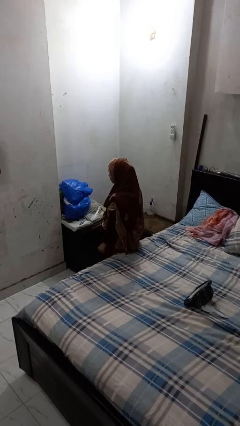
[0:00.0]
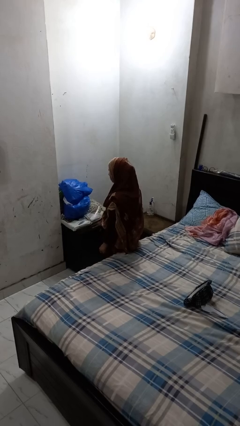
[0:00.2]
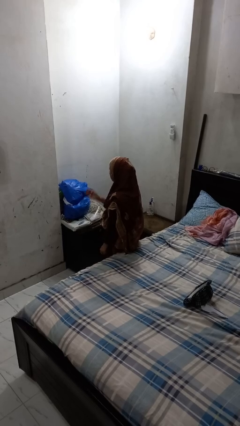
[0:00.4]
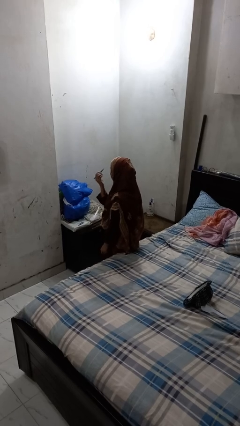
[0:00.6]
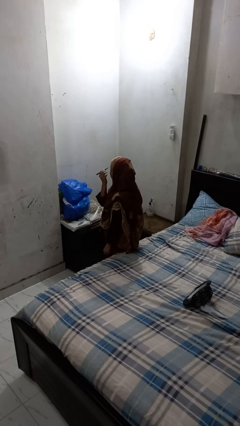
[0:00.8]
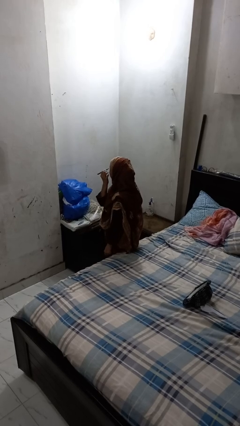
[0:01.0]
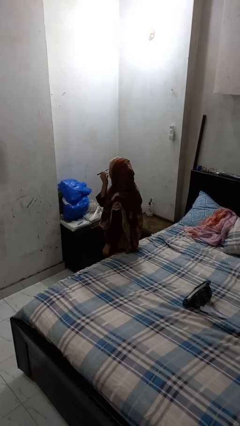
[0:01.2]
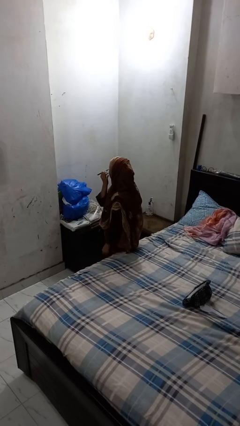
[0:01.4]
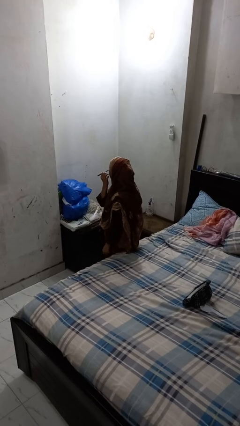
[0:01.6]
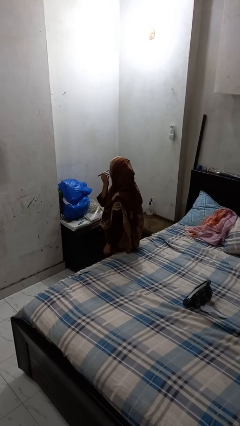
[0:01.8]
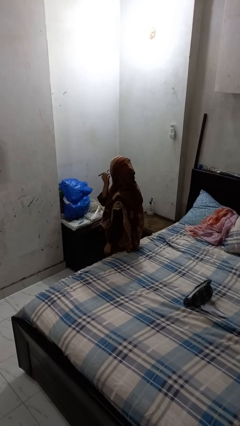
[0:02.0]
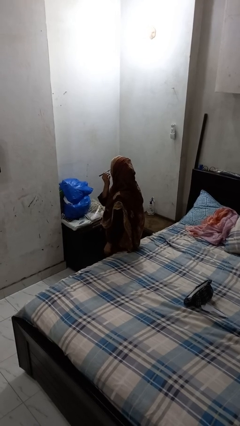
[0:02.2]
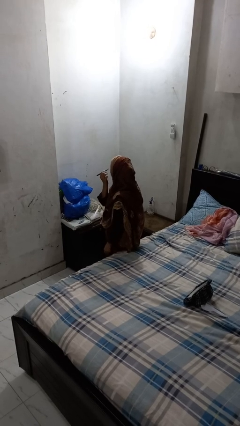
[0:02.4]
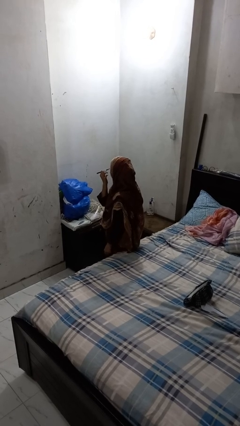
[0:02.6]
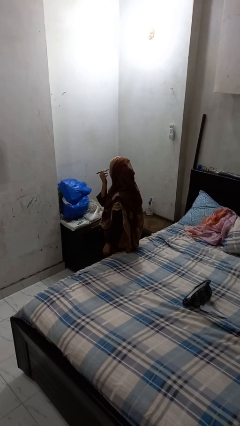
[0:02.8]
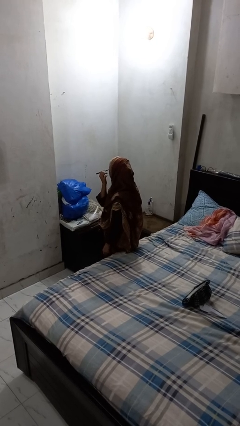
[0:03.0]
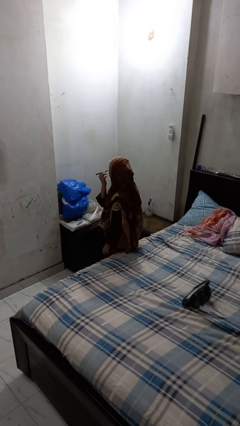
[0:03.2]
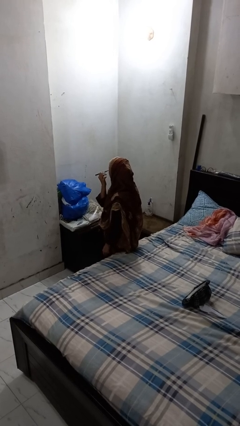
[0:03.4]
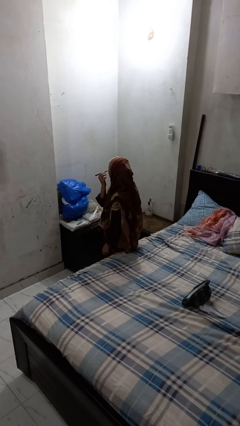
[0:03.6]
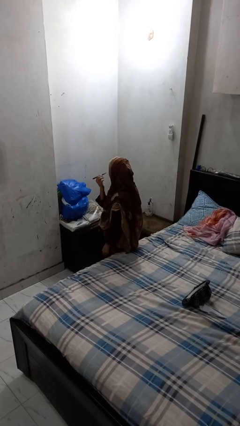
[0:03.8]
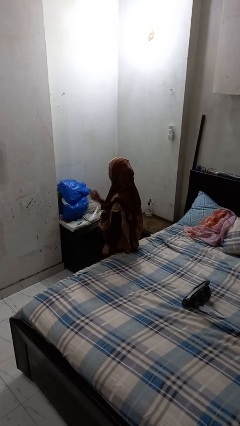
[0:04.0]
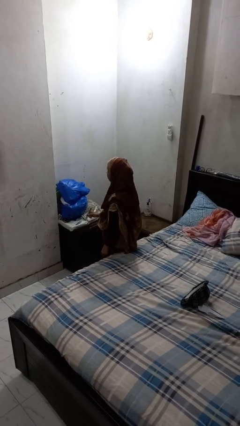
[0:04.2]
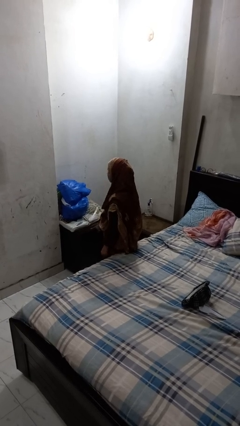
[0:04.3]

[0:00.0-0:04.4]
person applies eye makeup

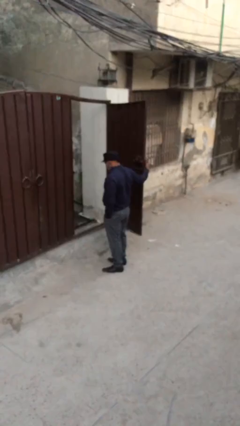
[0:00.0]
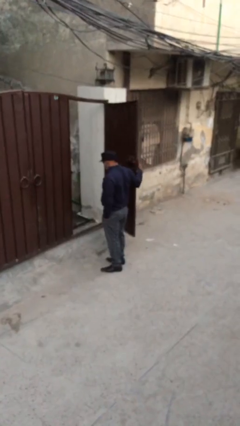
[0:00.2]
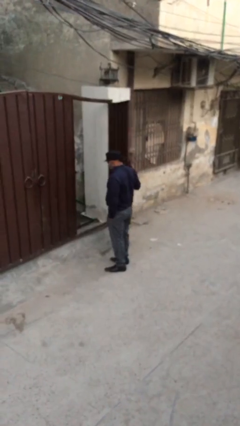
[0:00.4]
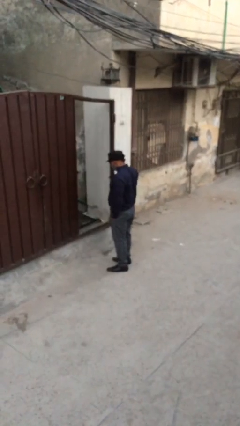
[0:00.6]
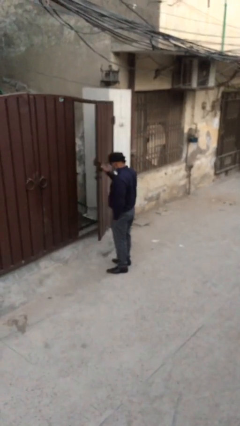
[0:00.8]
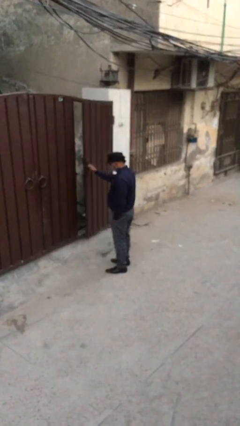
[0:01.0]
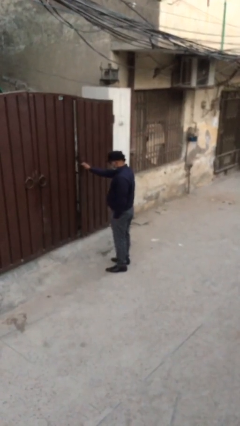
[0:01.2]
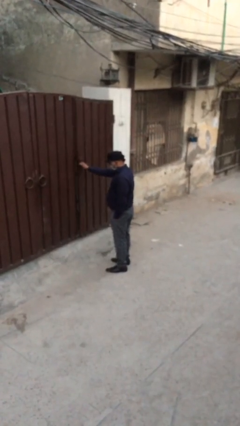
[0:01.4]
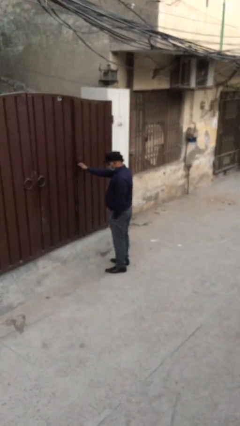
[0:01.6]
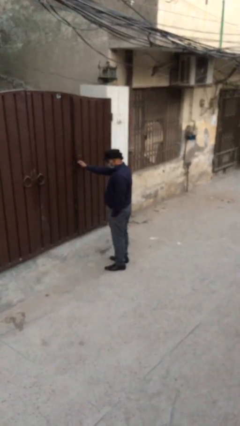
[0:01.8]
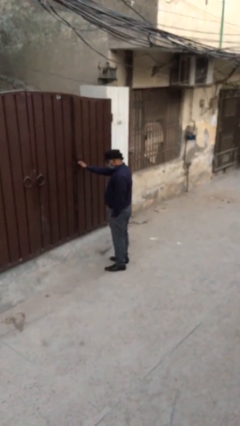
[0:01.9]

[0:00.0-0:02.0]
person closes facility door

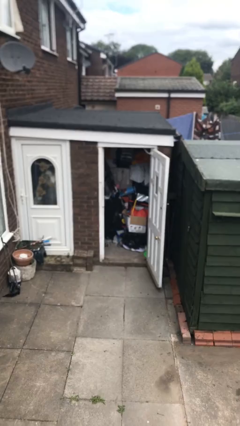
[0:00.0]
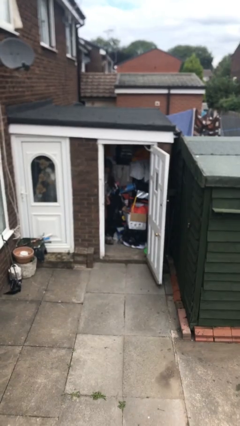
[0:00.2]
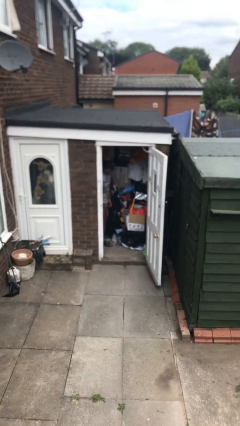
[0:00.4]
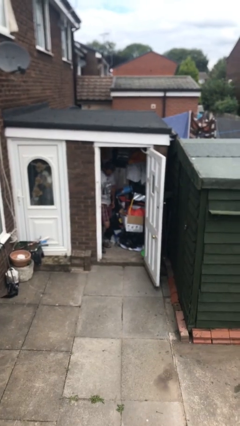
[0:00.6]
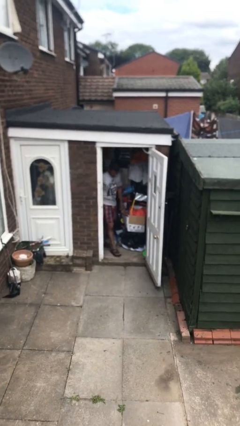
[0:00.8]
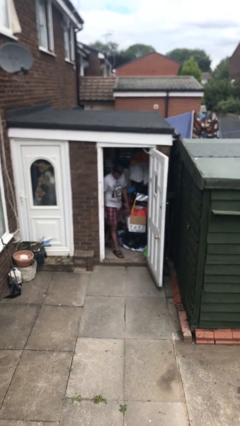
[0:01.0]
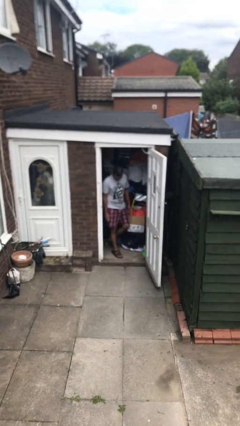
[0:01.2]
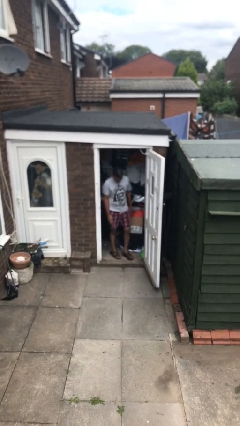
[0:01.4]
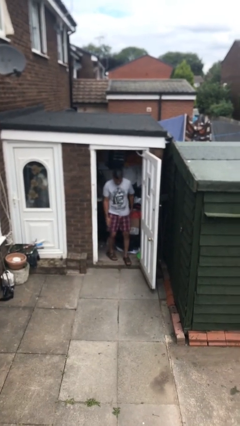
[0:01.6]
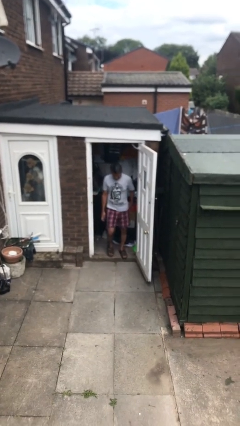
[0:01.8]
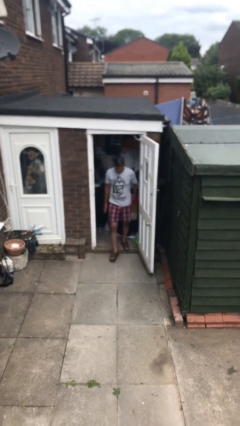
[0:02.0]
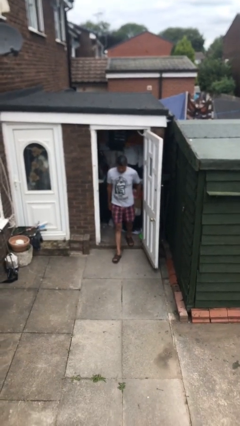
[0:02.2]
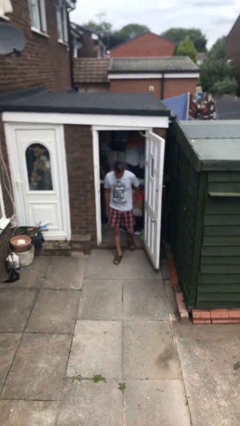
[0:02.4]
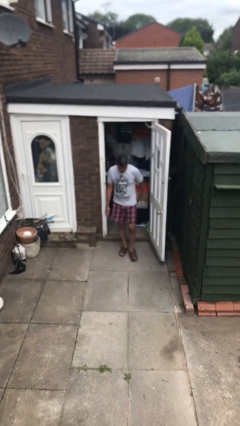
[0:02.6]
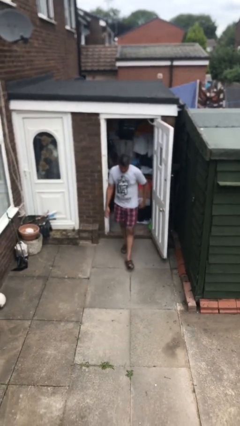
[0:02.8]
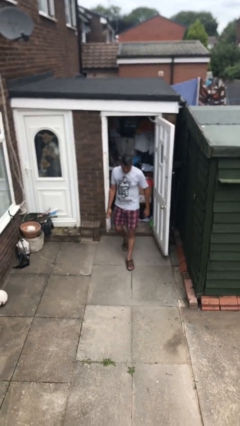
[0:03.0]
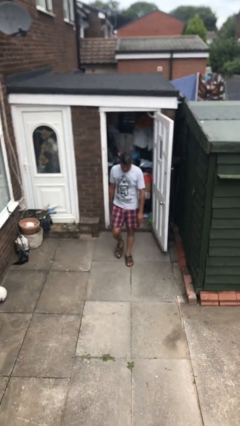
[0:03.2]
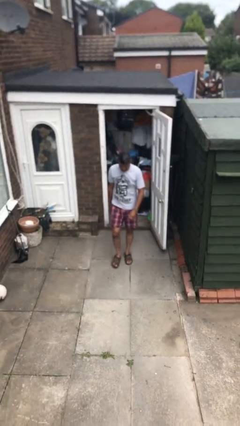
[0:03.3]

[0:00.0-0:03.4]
person enters scene through structure

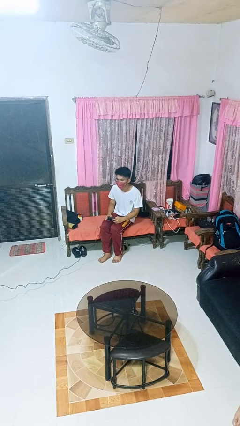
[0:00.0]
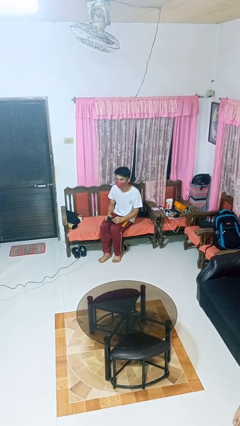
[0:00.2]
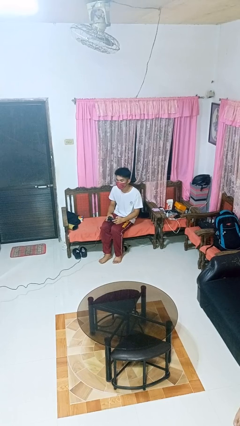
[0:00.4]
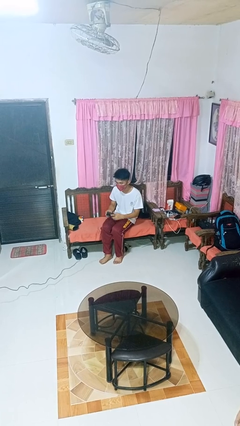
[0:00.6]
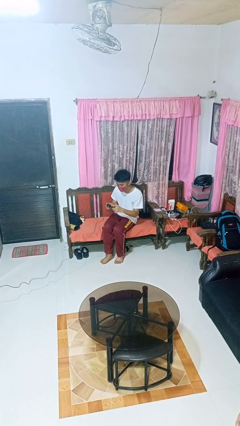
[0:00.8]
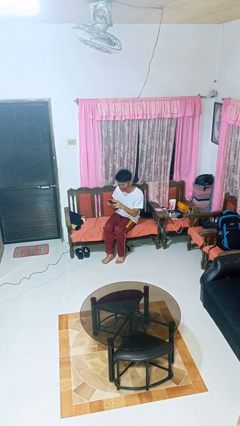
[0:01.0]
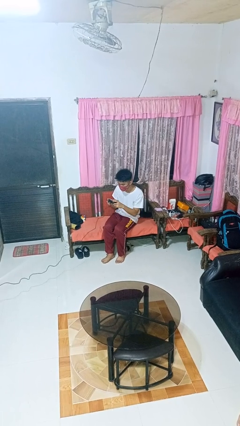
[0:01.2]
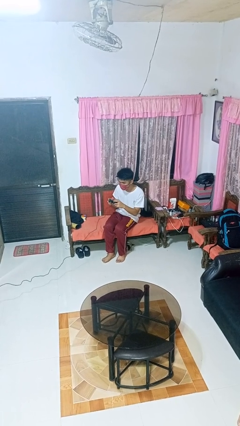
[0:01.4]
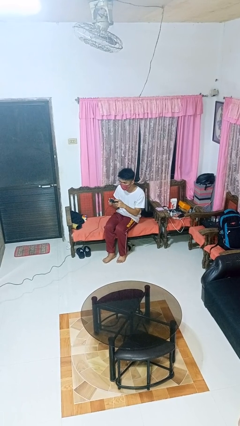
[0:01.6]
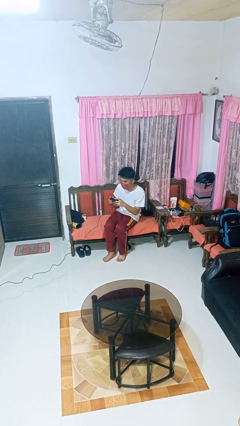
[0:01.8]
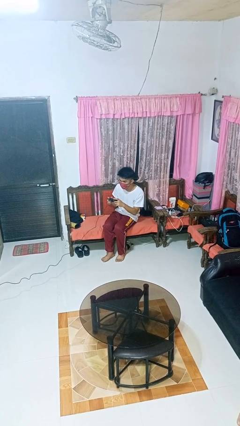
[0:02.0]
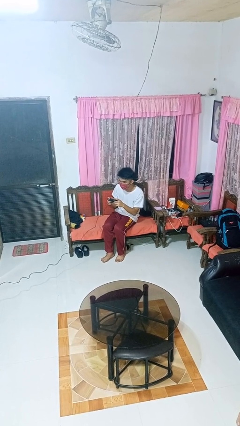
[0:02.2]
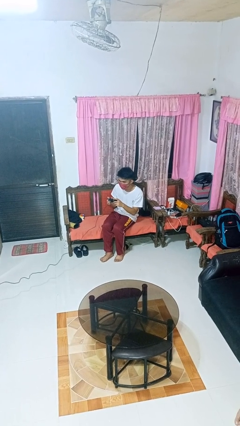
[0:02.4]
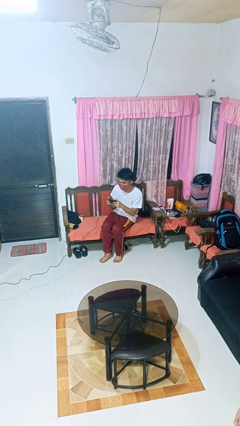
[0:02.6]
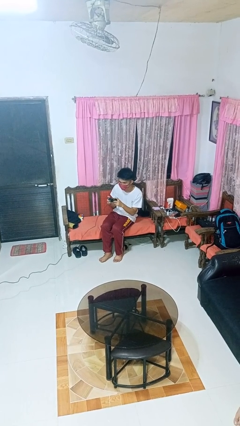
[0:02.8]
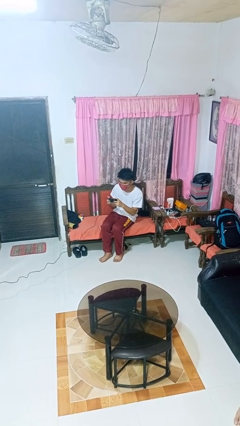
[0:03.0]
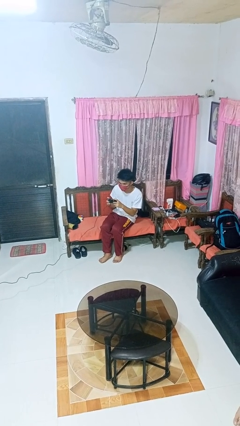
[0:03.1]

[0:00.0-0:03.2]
person interacts with handheld game

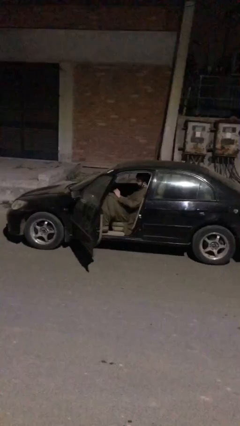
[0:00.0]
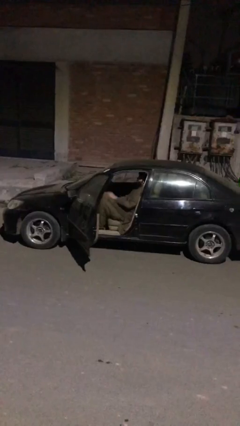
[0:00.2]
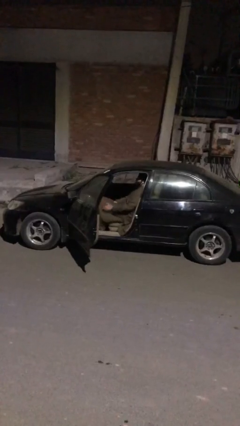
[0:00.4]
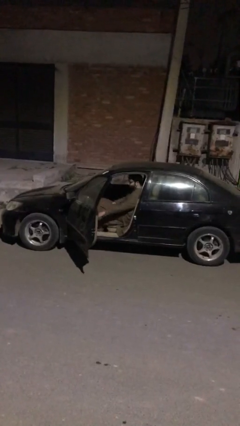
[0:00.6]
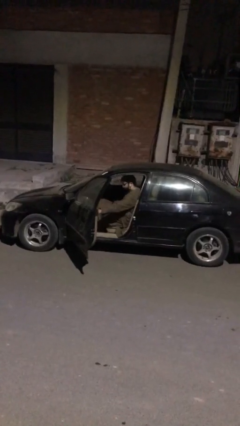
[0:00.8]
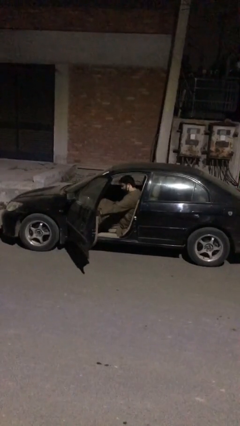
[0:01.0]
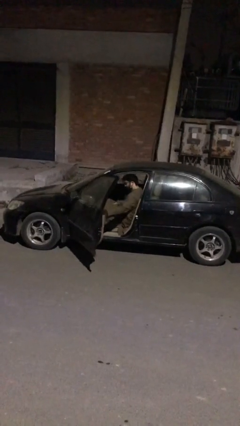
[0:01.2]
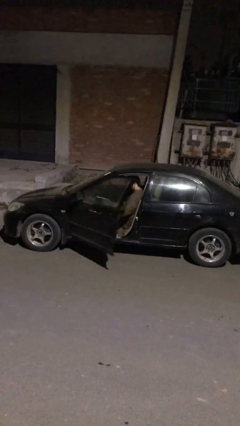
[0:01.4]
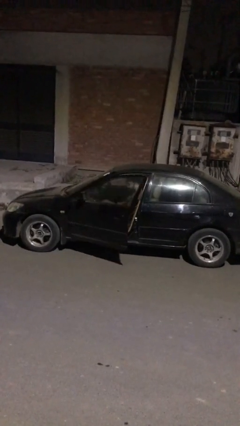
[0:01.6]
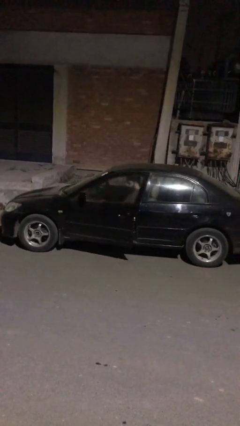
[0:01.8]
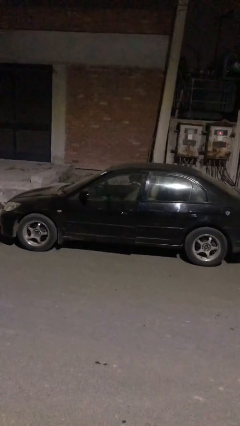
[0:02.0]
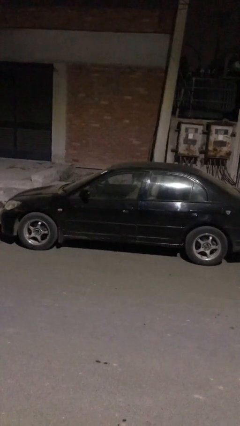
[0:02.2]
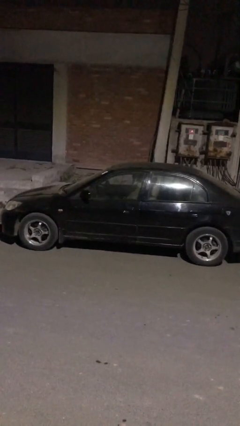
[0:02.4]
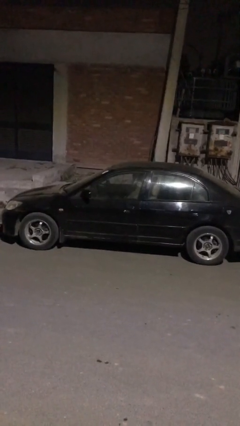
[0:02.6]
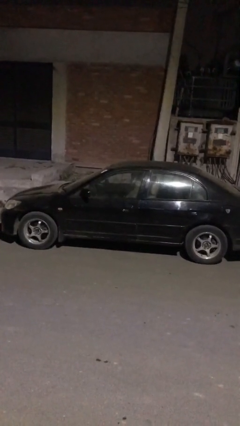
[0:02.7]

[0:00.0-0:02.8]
person closes car door

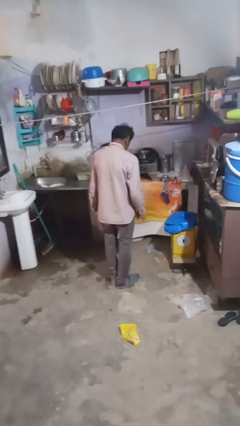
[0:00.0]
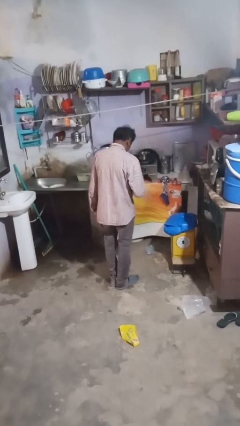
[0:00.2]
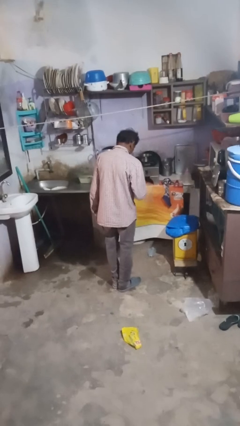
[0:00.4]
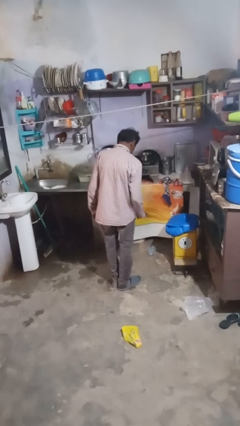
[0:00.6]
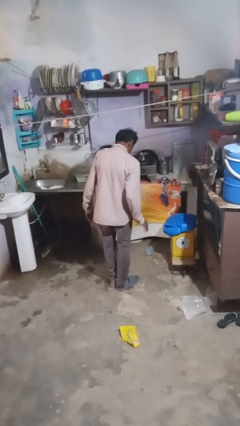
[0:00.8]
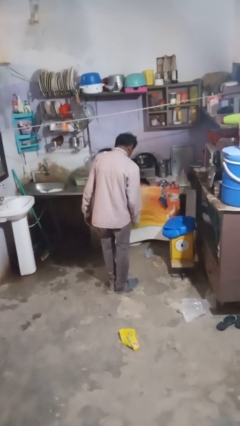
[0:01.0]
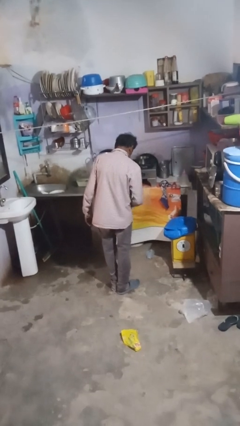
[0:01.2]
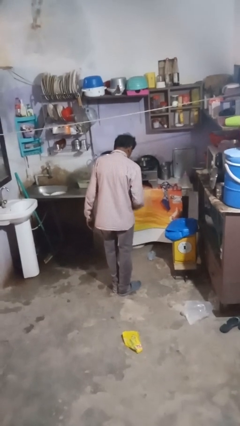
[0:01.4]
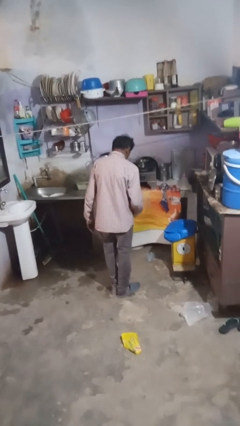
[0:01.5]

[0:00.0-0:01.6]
person bounces ball on floor
